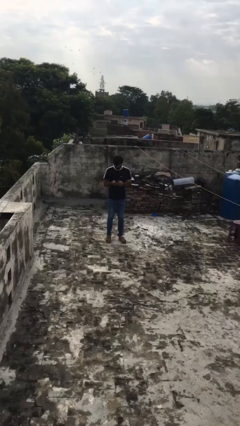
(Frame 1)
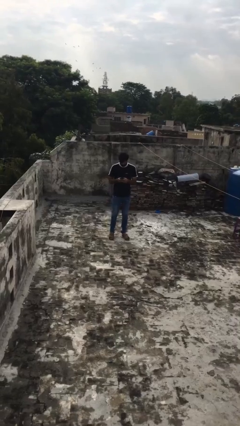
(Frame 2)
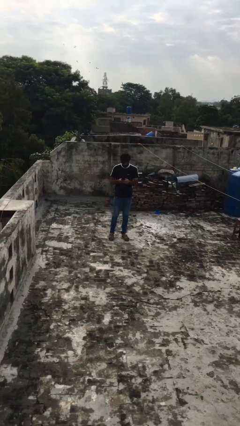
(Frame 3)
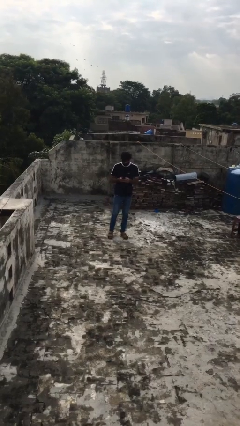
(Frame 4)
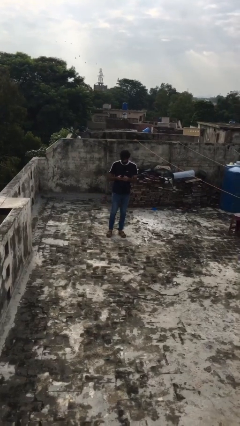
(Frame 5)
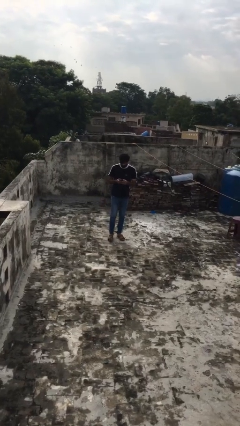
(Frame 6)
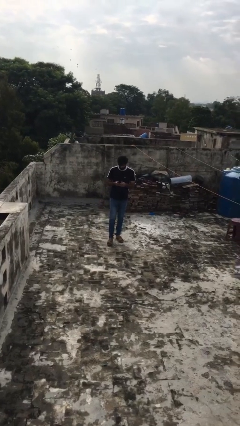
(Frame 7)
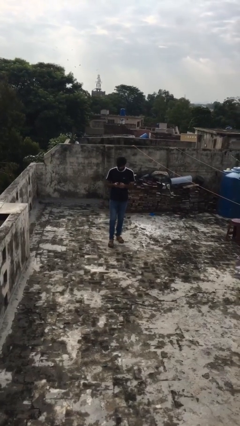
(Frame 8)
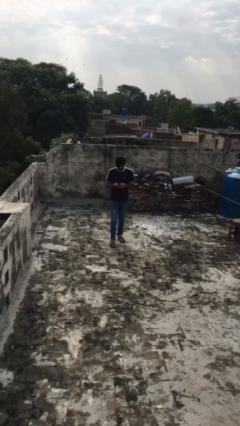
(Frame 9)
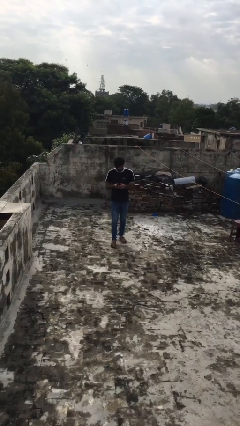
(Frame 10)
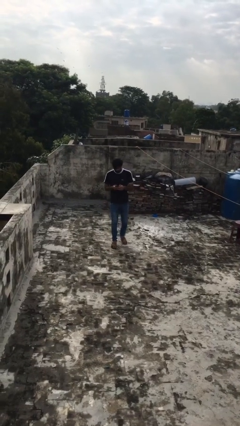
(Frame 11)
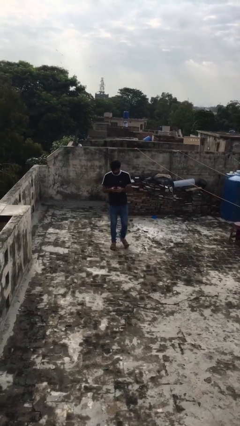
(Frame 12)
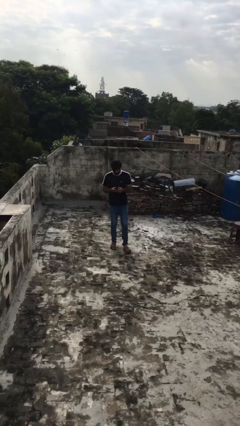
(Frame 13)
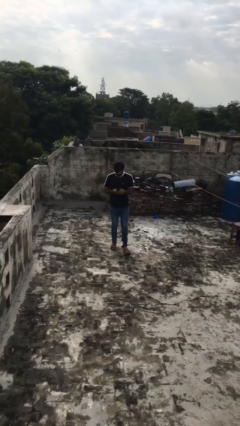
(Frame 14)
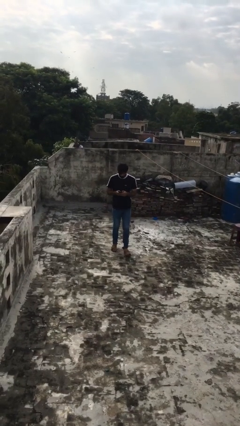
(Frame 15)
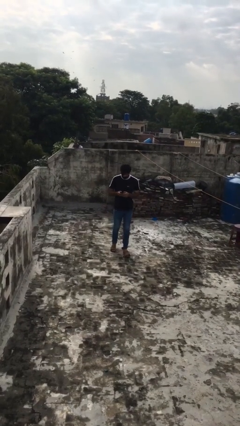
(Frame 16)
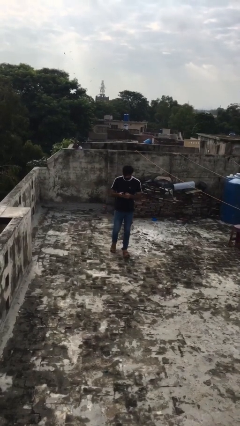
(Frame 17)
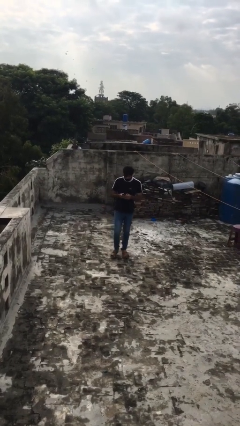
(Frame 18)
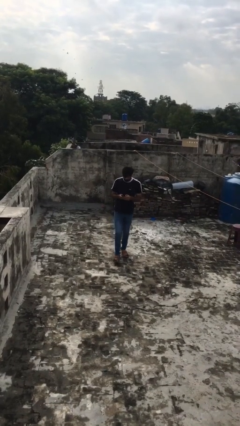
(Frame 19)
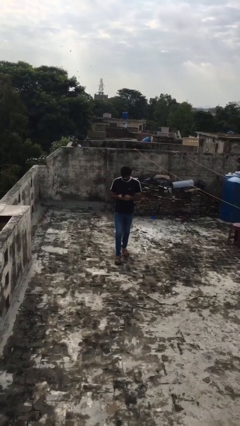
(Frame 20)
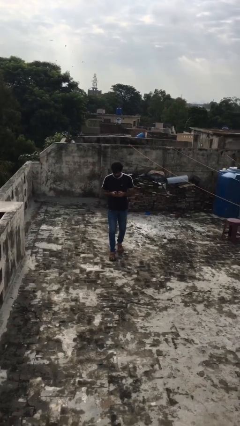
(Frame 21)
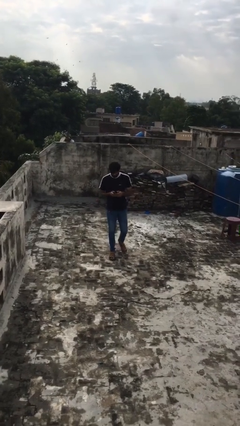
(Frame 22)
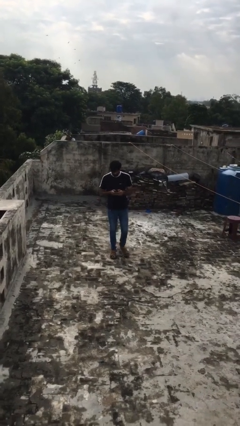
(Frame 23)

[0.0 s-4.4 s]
person texts on phone

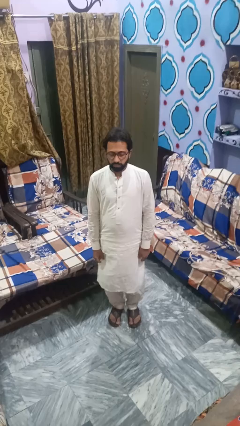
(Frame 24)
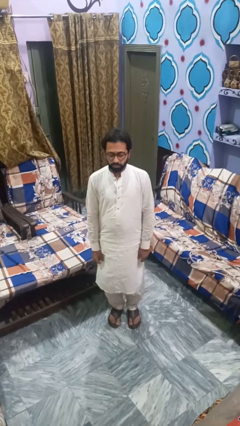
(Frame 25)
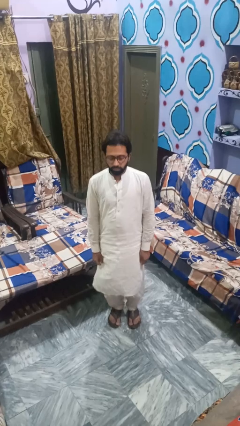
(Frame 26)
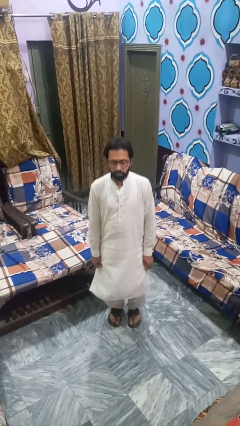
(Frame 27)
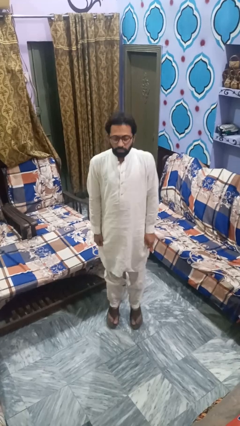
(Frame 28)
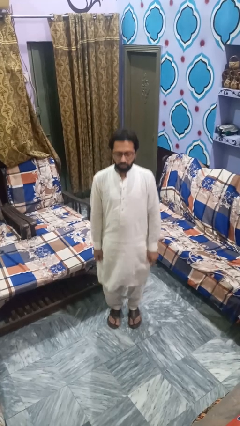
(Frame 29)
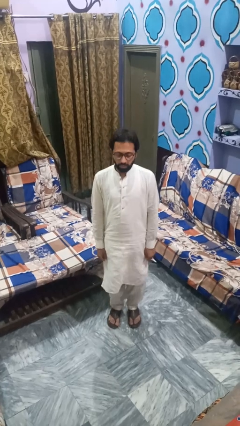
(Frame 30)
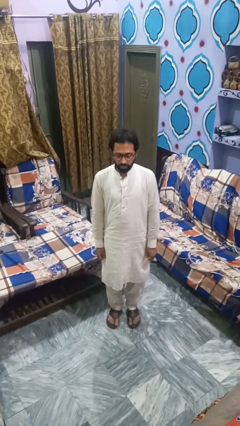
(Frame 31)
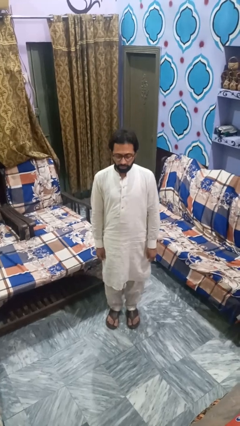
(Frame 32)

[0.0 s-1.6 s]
person jumps

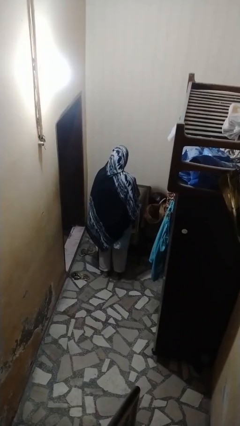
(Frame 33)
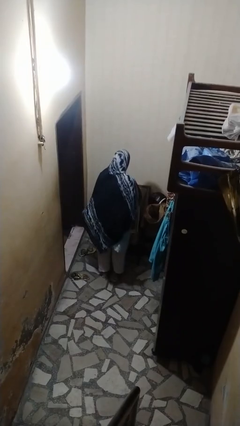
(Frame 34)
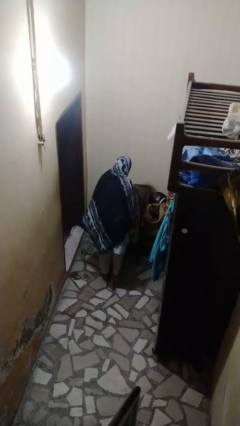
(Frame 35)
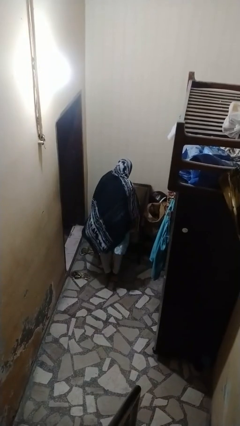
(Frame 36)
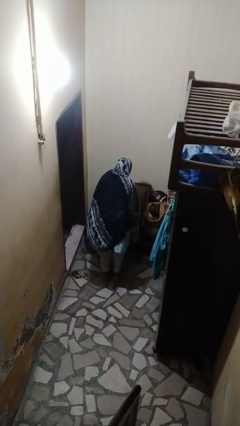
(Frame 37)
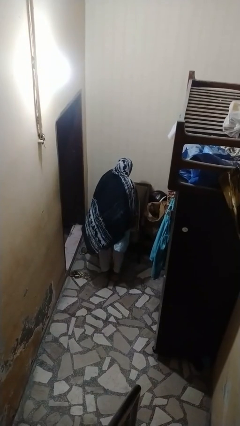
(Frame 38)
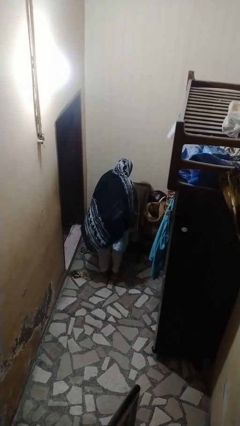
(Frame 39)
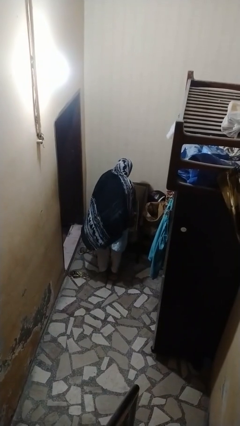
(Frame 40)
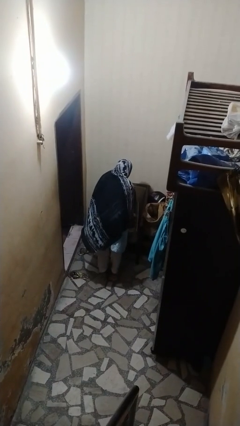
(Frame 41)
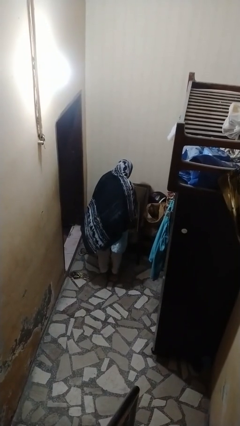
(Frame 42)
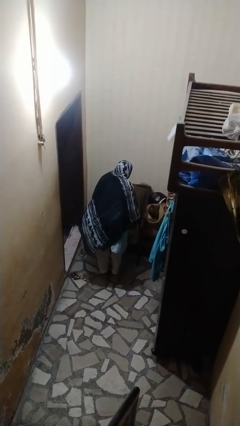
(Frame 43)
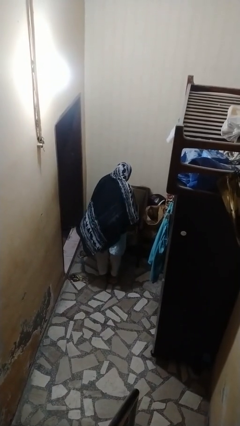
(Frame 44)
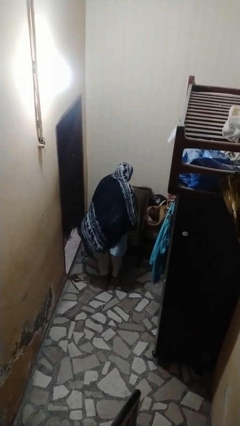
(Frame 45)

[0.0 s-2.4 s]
person searches in box

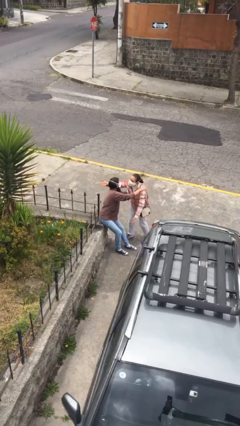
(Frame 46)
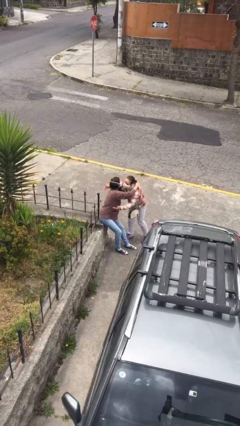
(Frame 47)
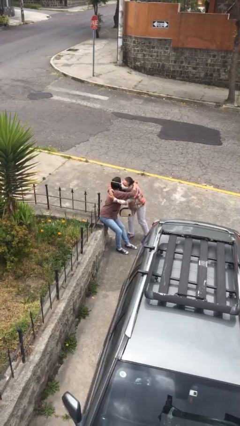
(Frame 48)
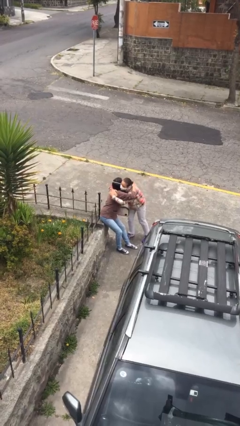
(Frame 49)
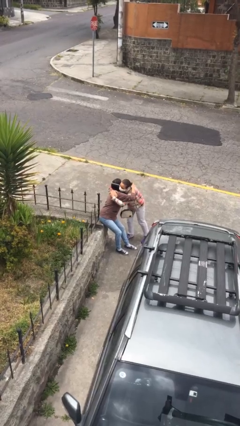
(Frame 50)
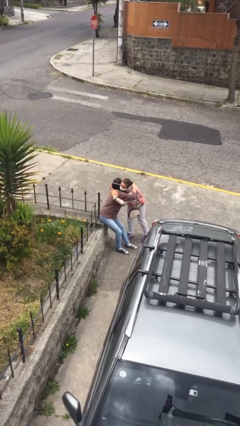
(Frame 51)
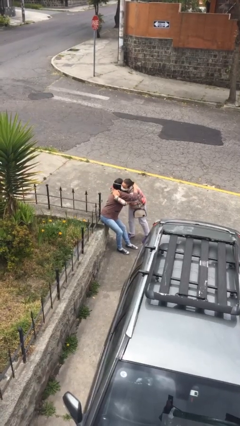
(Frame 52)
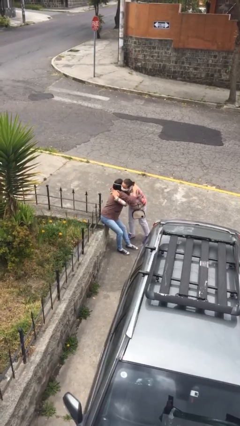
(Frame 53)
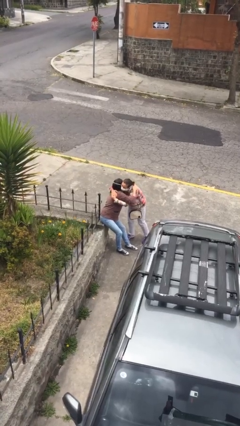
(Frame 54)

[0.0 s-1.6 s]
person embraces person

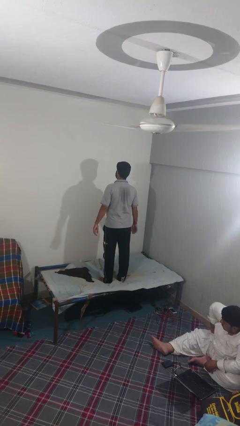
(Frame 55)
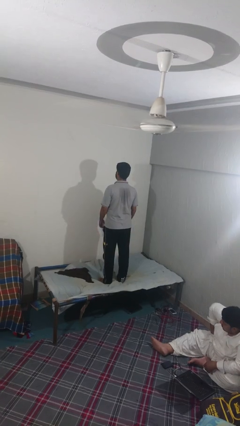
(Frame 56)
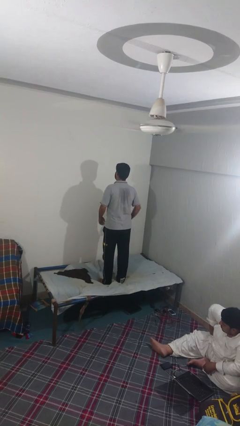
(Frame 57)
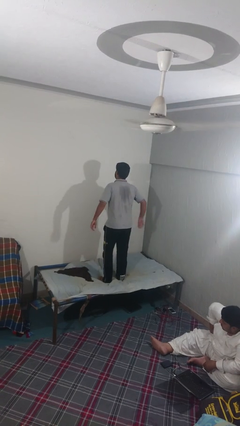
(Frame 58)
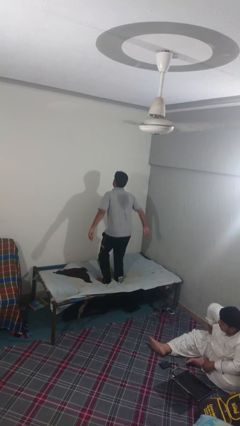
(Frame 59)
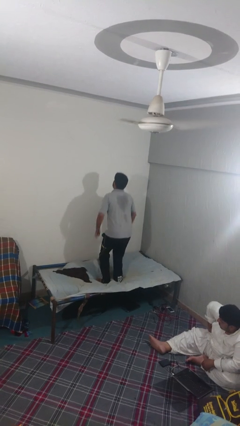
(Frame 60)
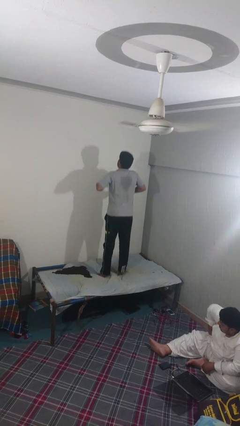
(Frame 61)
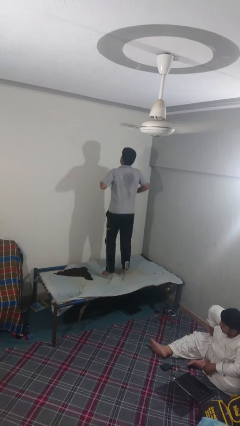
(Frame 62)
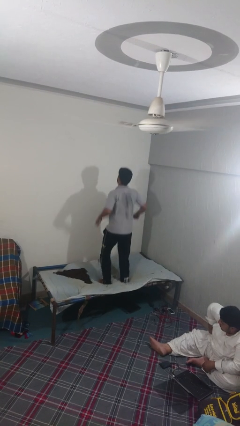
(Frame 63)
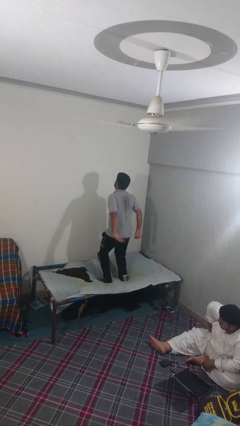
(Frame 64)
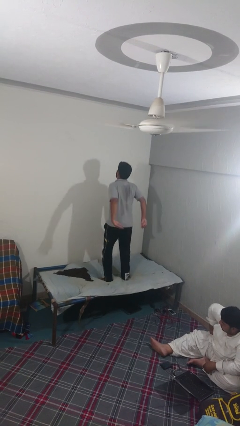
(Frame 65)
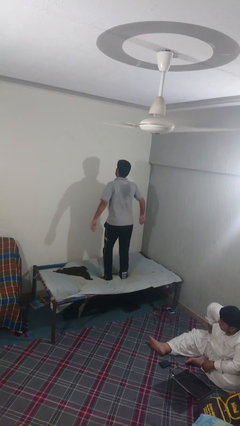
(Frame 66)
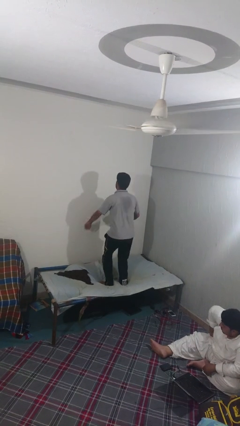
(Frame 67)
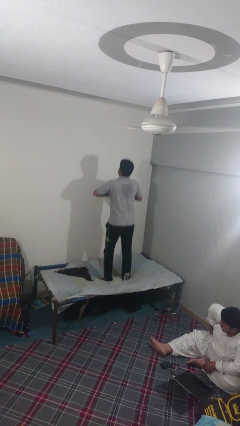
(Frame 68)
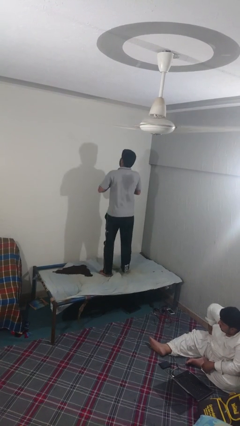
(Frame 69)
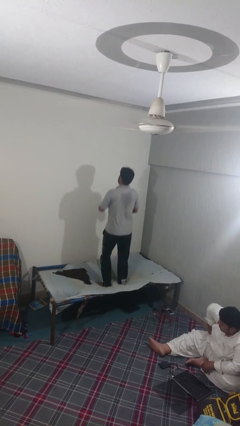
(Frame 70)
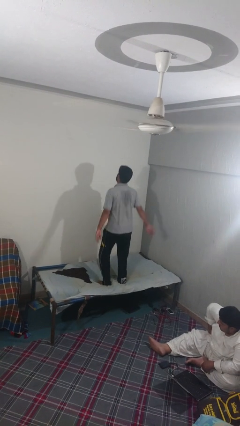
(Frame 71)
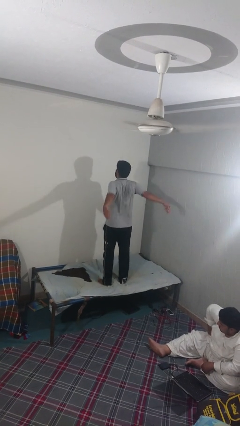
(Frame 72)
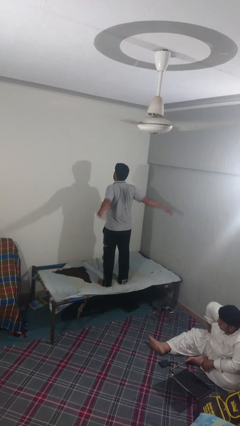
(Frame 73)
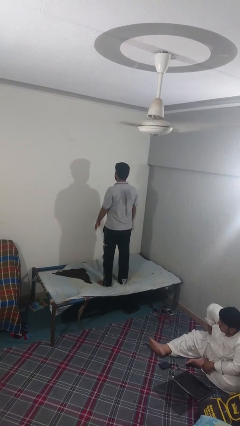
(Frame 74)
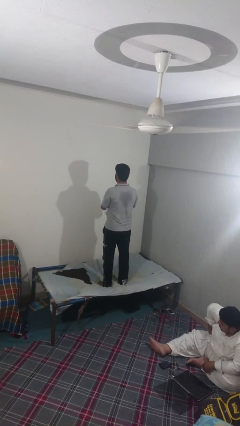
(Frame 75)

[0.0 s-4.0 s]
person jumps on bed

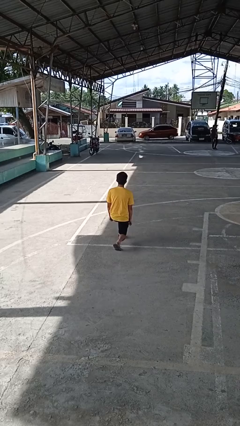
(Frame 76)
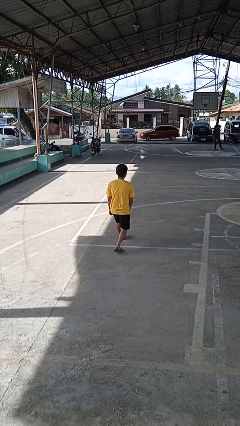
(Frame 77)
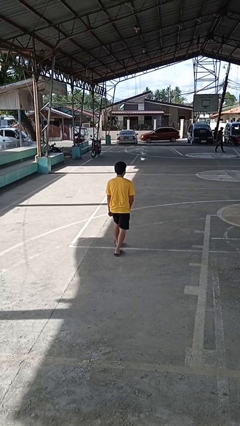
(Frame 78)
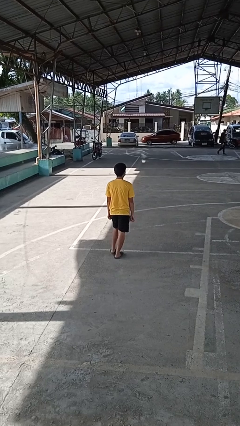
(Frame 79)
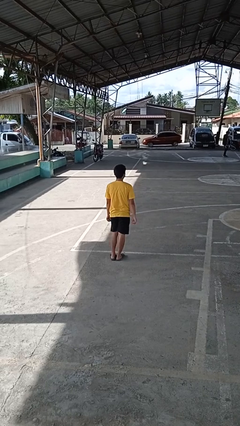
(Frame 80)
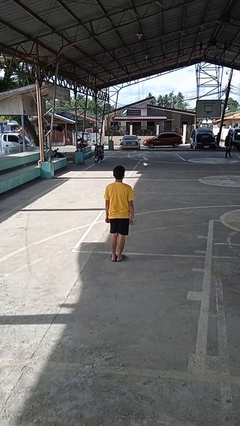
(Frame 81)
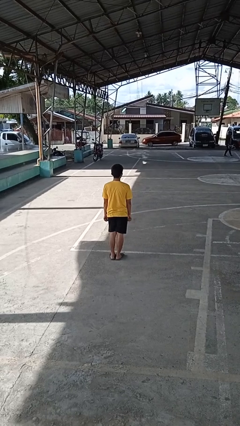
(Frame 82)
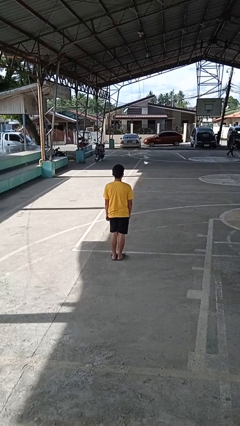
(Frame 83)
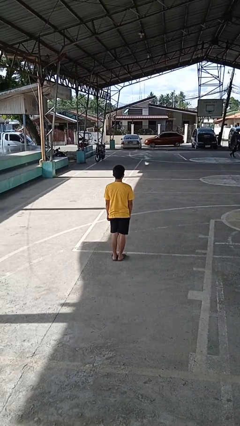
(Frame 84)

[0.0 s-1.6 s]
person stands up from floor

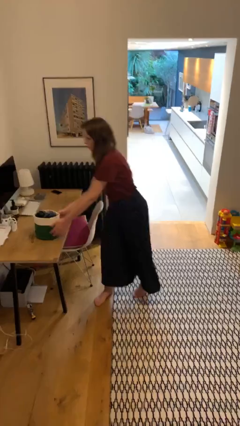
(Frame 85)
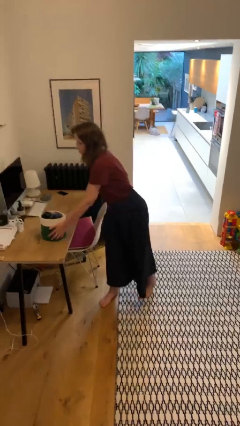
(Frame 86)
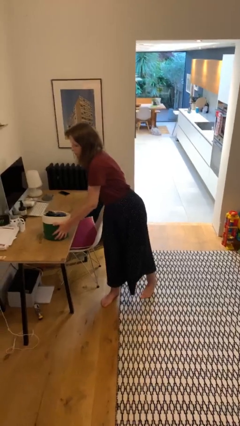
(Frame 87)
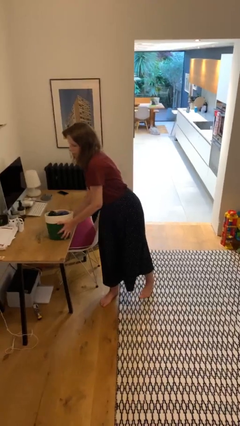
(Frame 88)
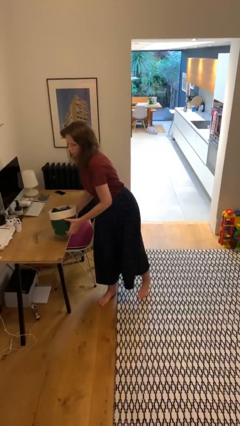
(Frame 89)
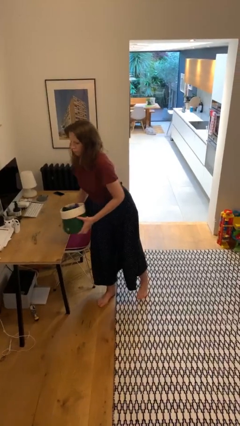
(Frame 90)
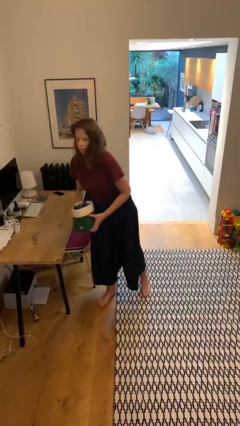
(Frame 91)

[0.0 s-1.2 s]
person picks up object from table

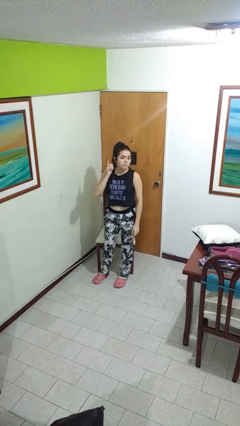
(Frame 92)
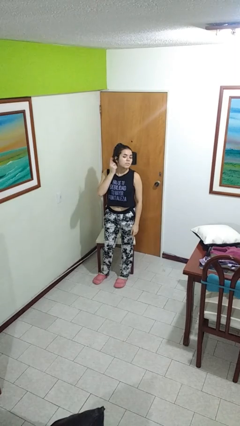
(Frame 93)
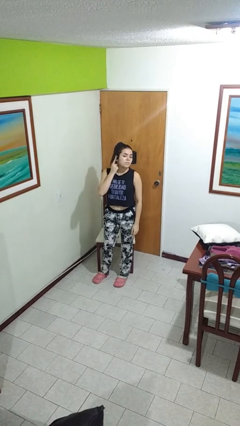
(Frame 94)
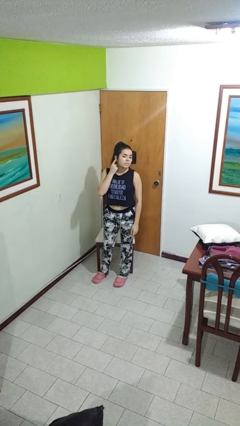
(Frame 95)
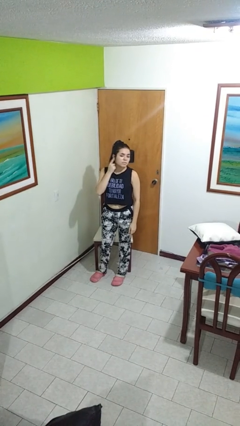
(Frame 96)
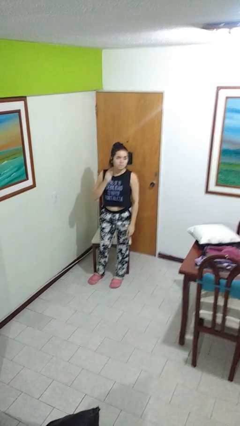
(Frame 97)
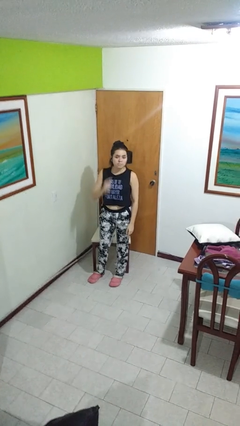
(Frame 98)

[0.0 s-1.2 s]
person gestures listen closely